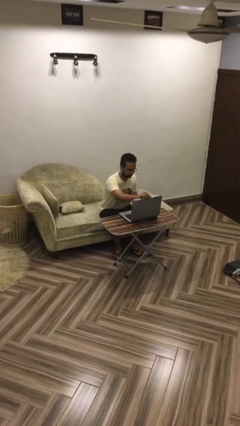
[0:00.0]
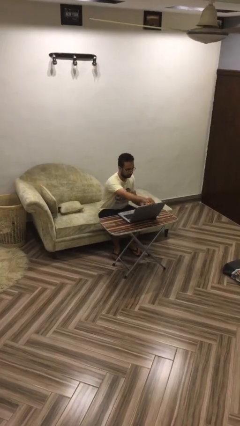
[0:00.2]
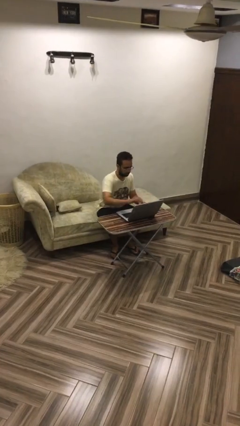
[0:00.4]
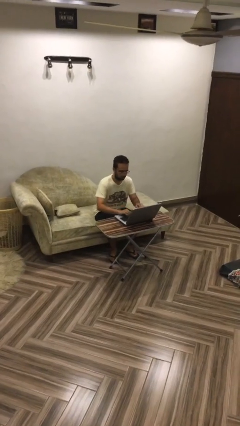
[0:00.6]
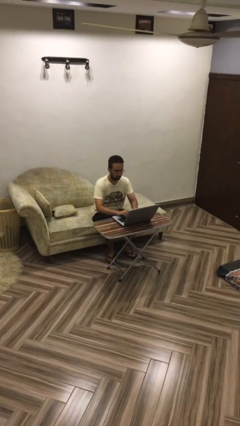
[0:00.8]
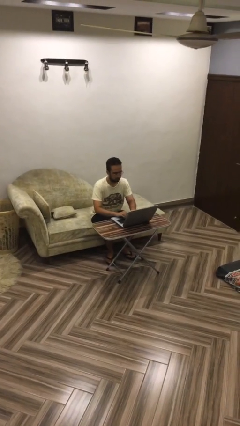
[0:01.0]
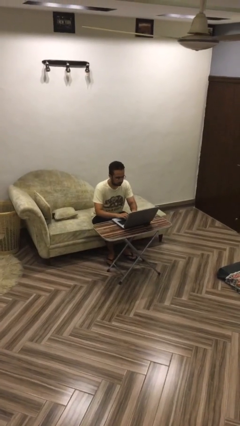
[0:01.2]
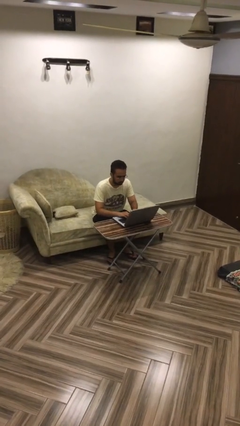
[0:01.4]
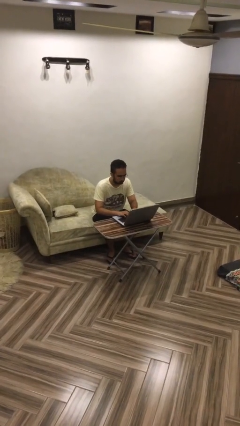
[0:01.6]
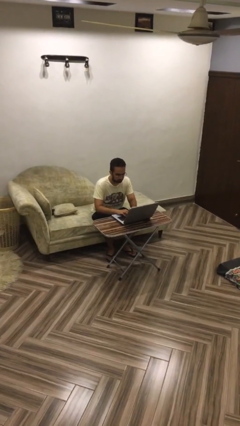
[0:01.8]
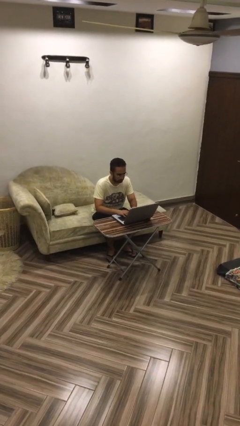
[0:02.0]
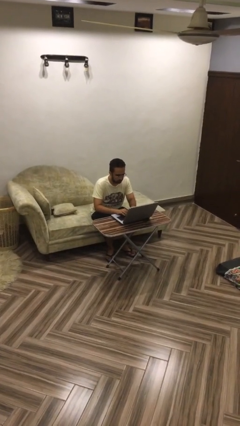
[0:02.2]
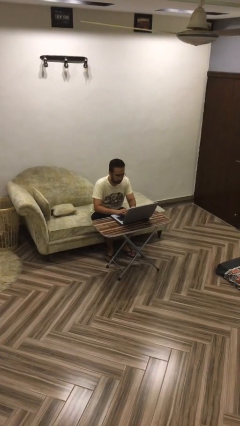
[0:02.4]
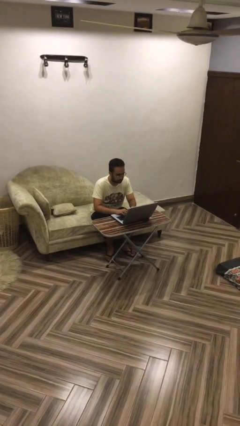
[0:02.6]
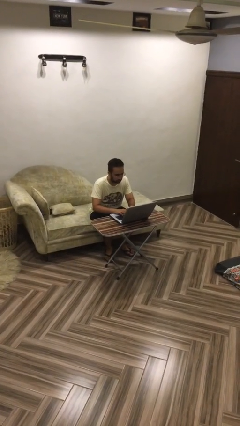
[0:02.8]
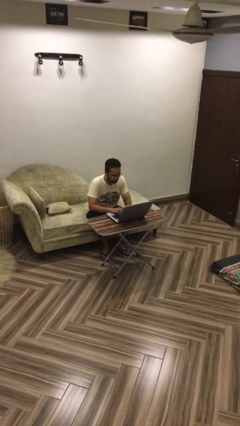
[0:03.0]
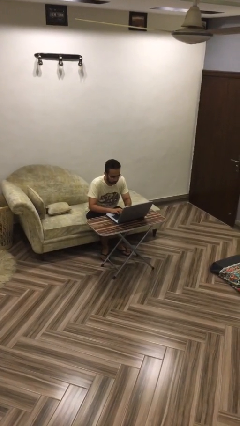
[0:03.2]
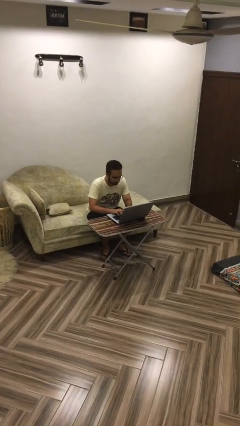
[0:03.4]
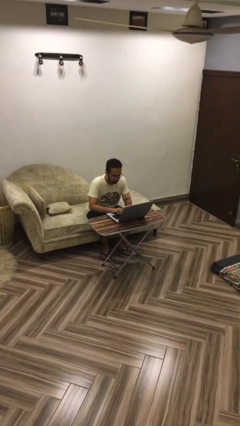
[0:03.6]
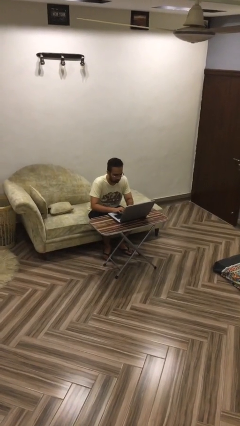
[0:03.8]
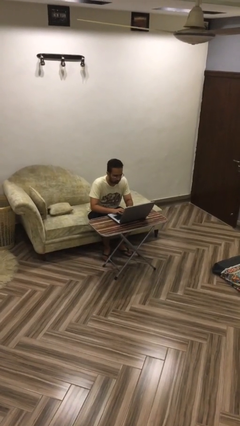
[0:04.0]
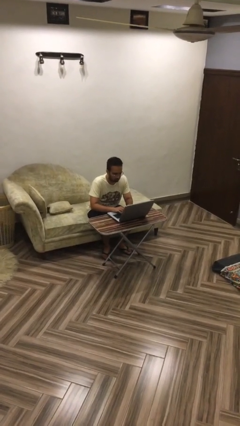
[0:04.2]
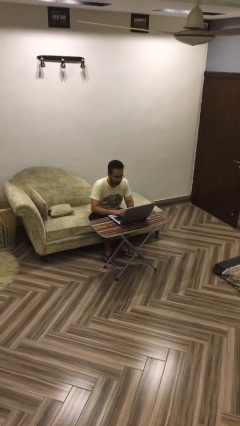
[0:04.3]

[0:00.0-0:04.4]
person interacts with laptop

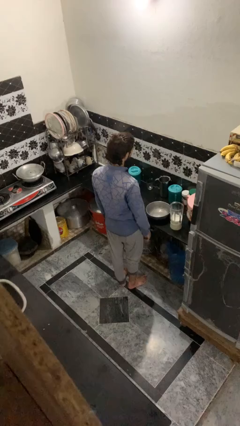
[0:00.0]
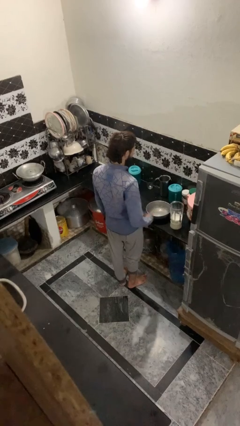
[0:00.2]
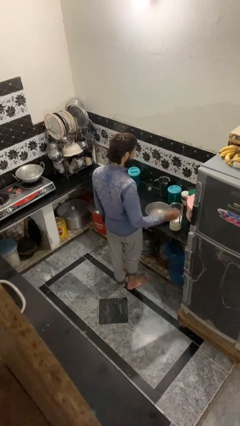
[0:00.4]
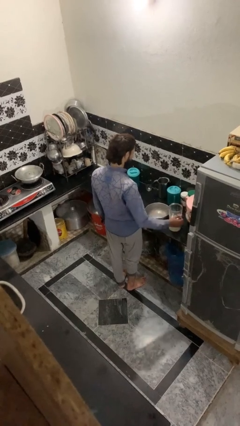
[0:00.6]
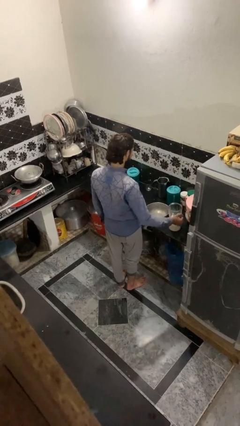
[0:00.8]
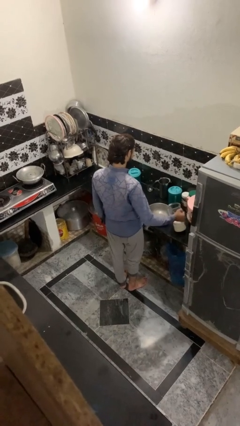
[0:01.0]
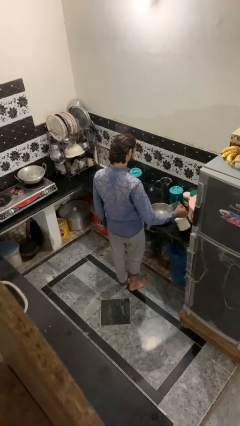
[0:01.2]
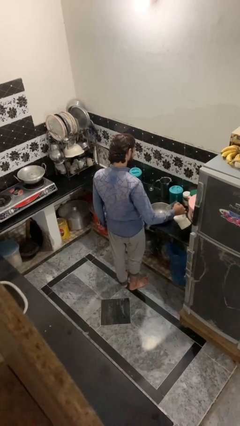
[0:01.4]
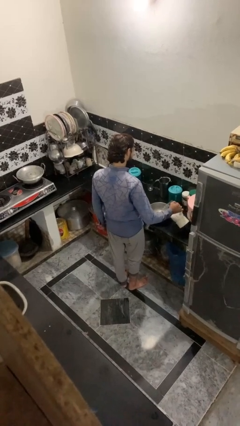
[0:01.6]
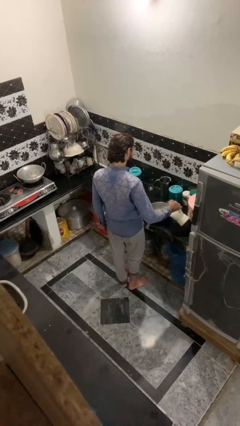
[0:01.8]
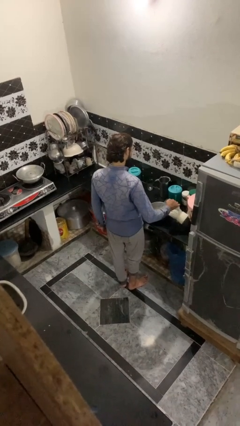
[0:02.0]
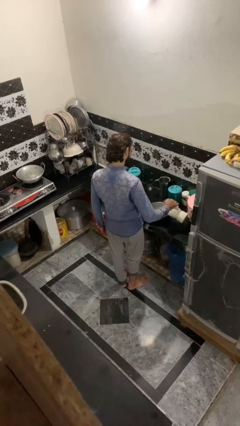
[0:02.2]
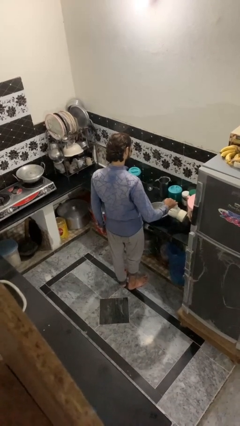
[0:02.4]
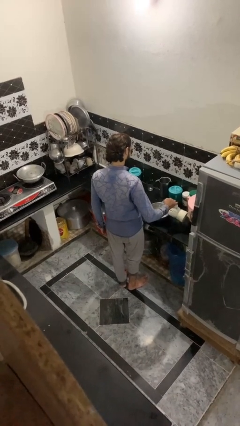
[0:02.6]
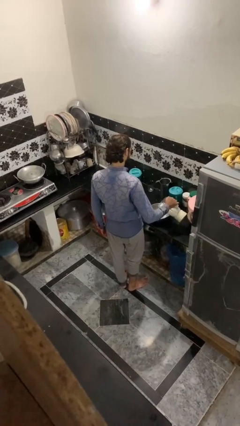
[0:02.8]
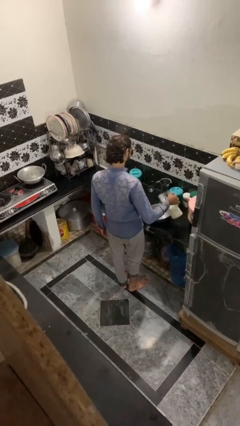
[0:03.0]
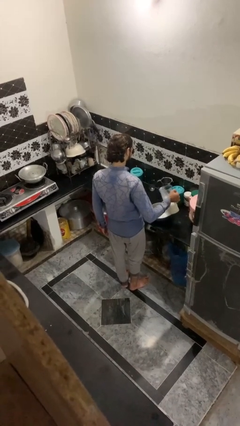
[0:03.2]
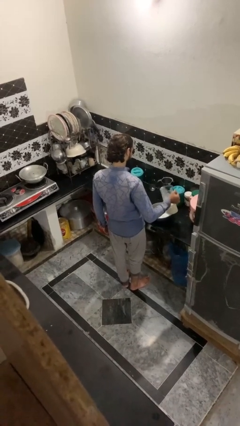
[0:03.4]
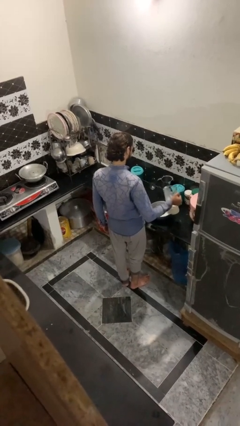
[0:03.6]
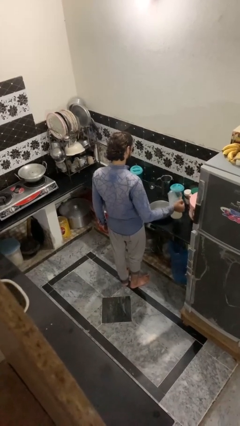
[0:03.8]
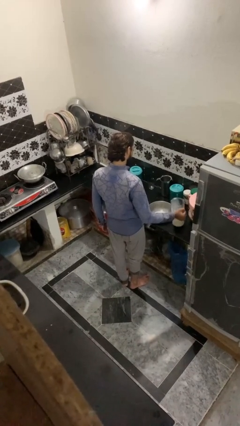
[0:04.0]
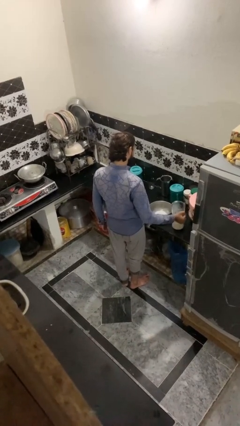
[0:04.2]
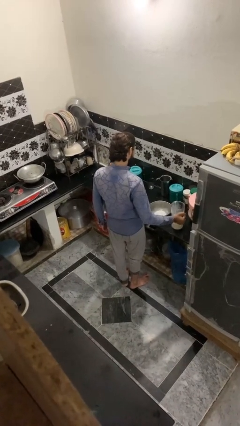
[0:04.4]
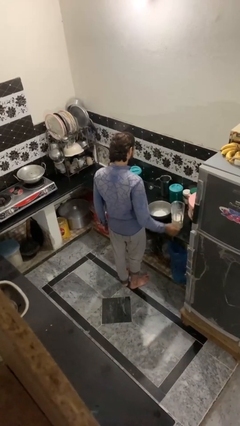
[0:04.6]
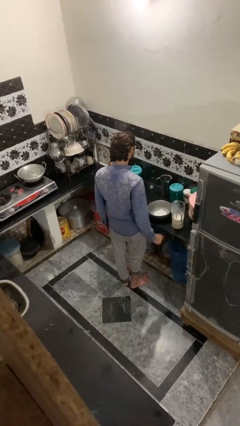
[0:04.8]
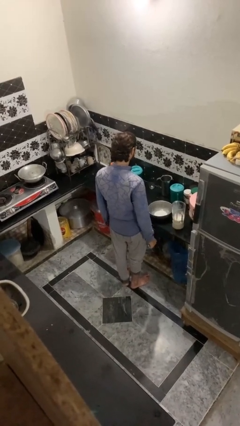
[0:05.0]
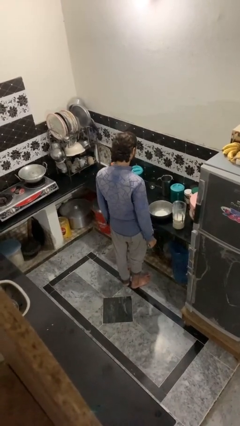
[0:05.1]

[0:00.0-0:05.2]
person pours into bowl

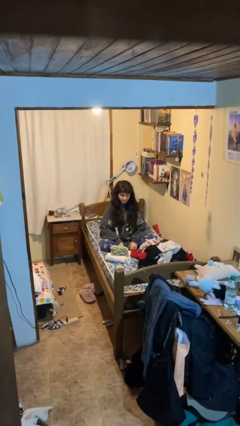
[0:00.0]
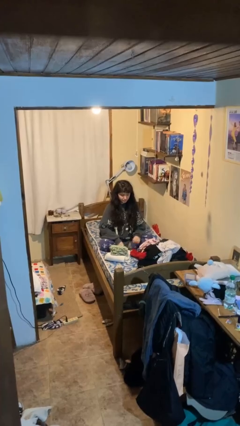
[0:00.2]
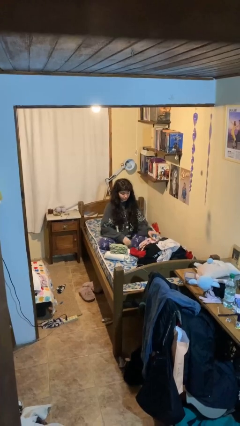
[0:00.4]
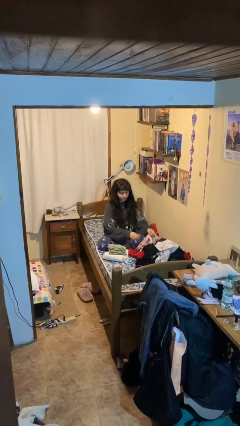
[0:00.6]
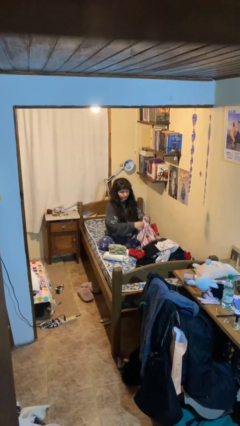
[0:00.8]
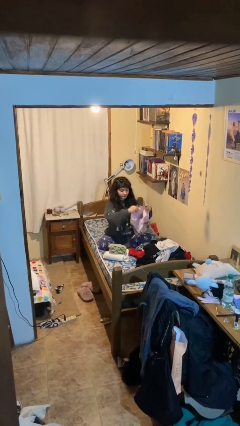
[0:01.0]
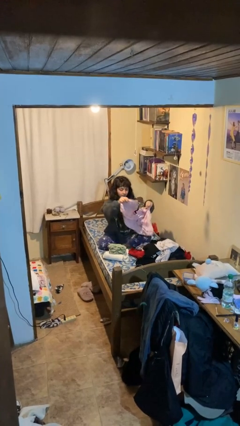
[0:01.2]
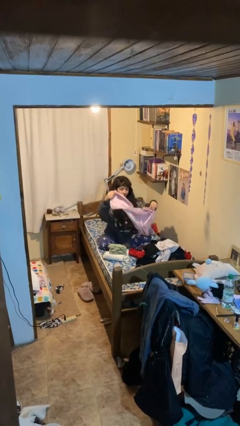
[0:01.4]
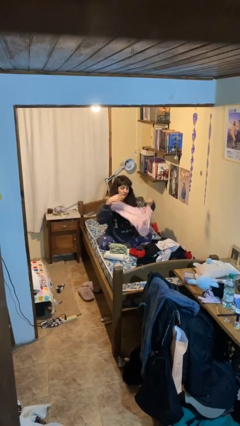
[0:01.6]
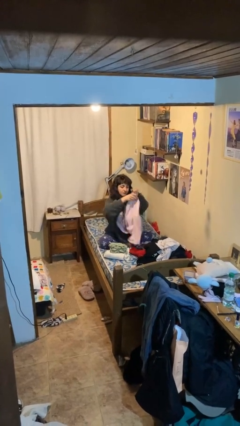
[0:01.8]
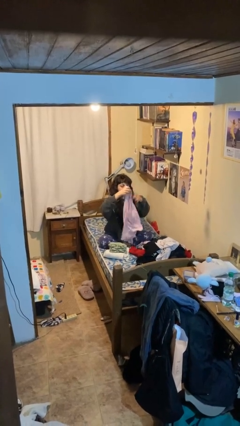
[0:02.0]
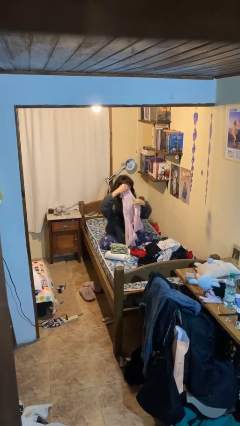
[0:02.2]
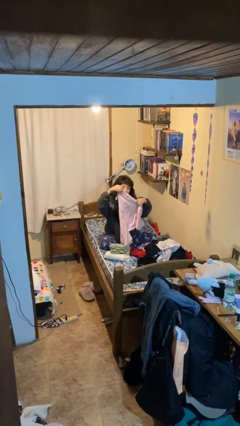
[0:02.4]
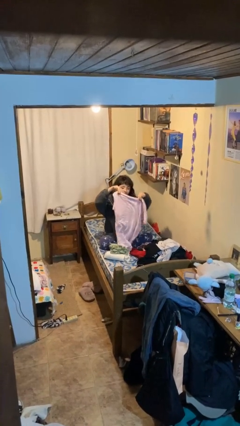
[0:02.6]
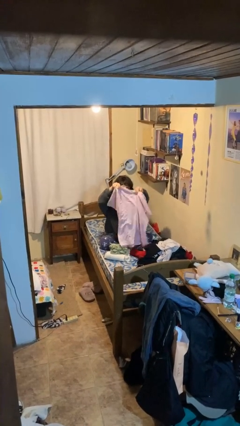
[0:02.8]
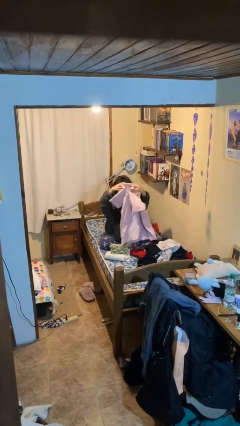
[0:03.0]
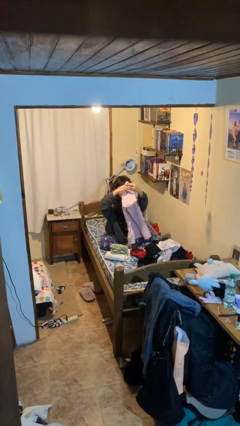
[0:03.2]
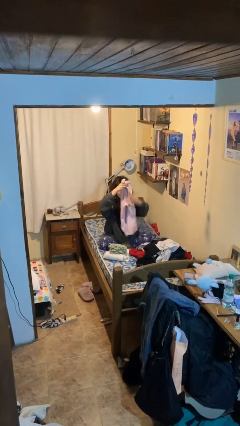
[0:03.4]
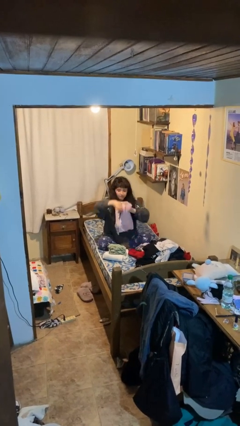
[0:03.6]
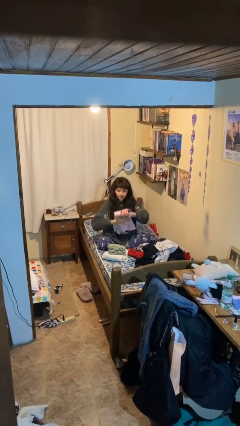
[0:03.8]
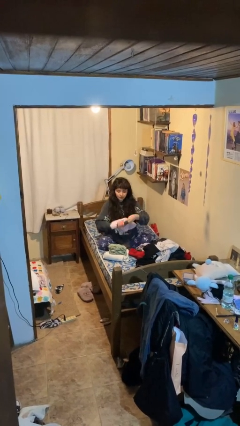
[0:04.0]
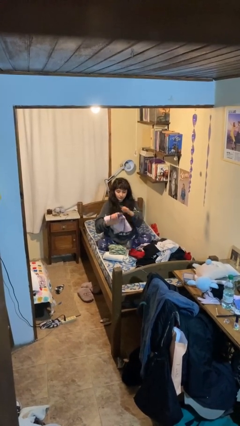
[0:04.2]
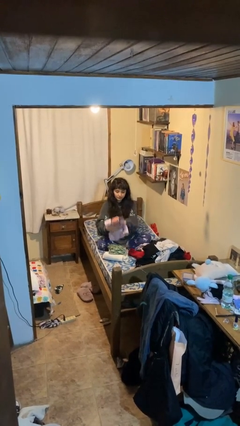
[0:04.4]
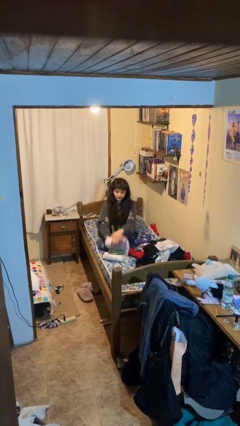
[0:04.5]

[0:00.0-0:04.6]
person folds shirt

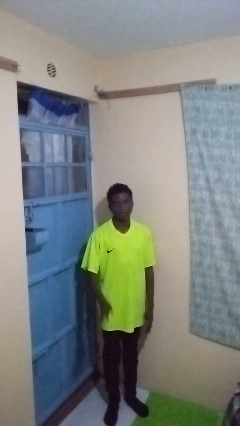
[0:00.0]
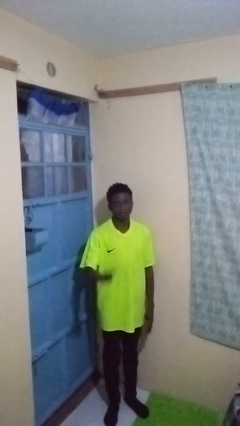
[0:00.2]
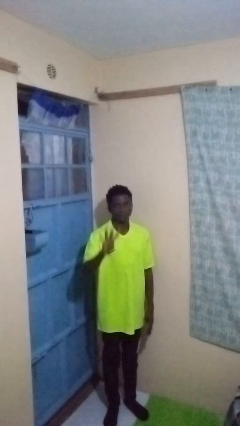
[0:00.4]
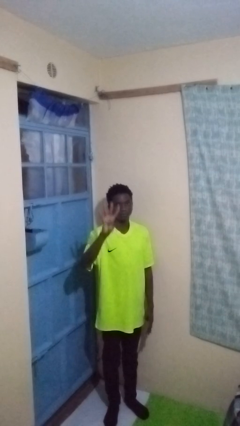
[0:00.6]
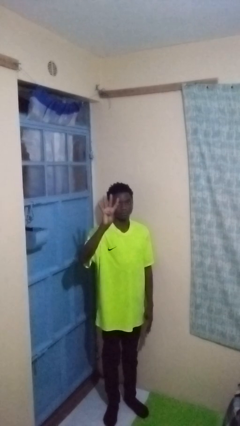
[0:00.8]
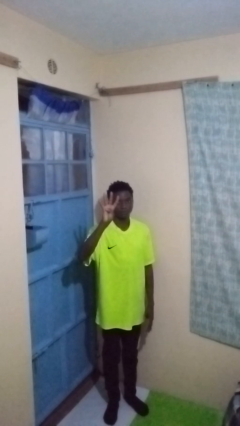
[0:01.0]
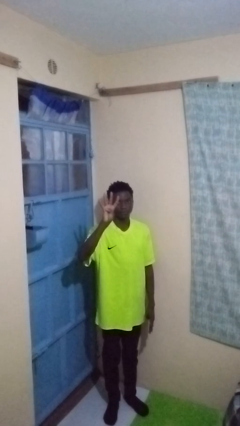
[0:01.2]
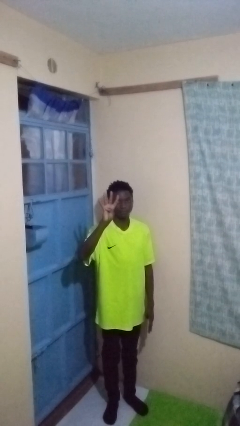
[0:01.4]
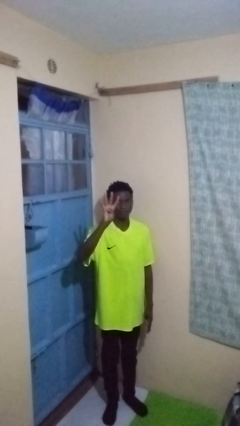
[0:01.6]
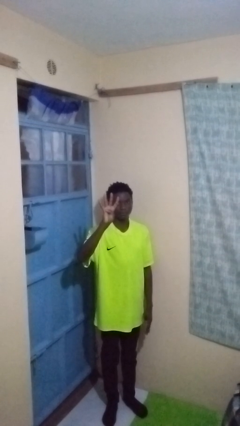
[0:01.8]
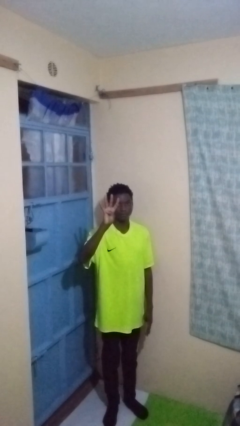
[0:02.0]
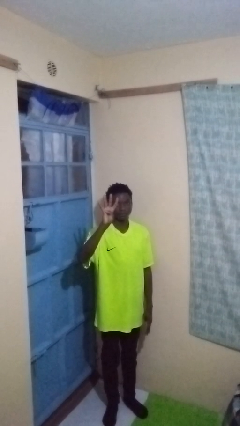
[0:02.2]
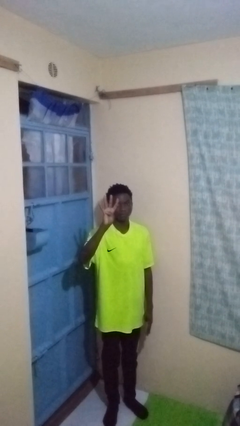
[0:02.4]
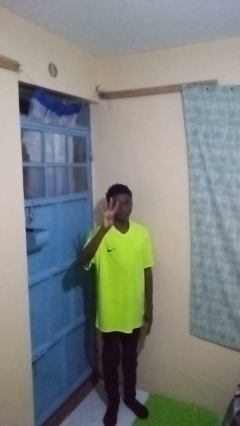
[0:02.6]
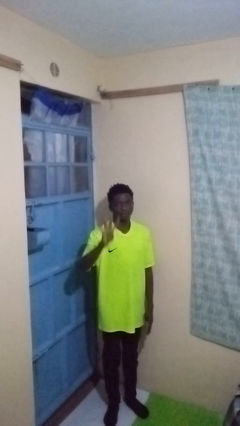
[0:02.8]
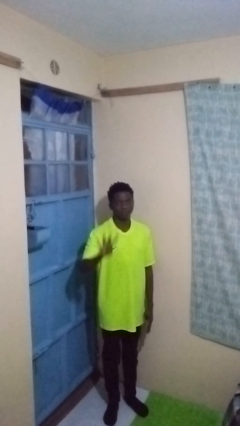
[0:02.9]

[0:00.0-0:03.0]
person gestures number four

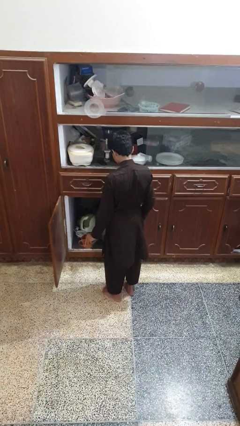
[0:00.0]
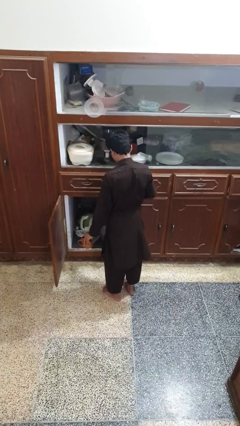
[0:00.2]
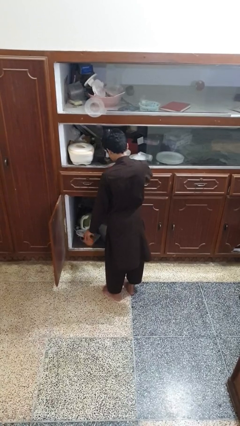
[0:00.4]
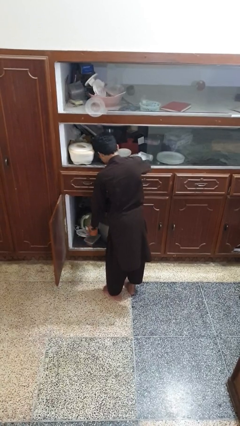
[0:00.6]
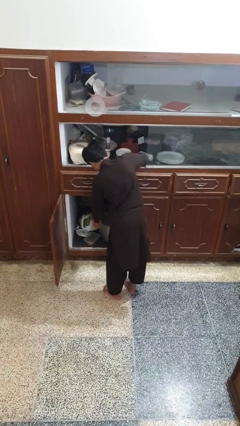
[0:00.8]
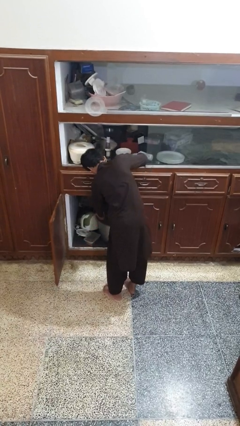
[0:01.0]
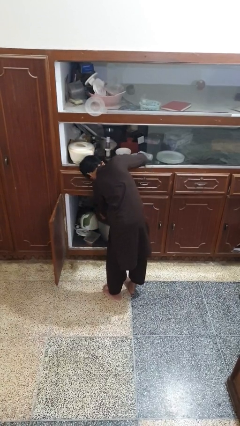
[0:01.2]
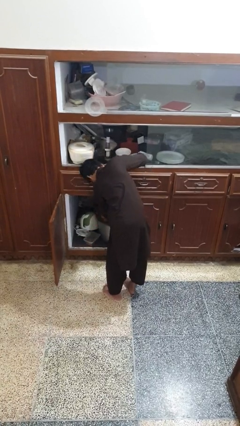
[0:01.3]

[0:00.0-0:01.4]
person puts object in cabinet
